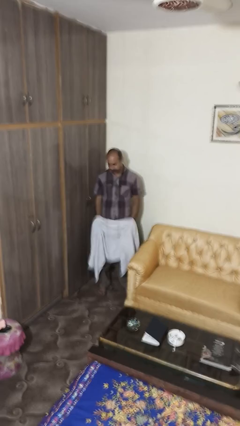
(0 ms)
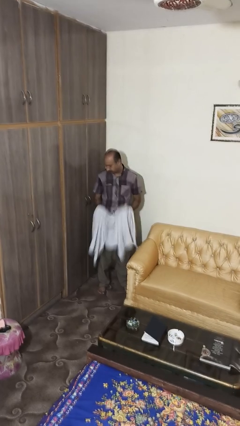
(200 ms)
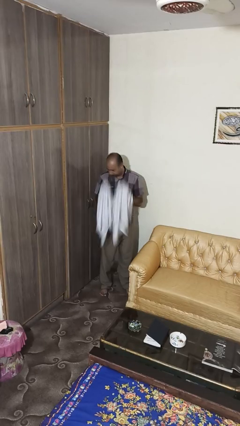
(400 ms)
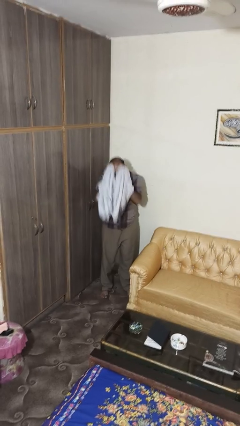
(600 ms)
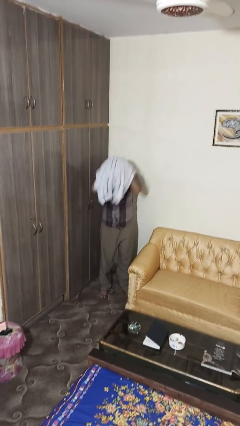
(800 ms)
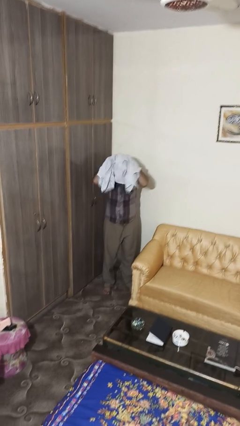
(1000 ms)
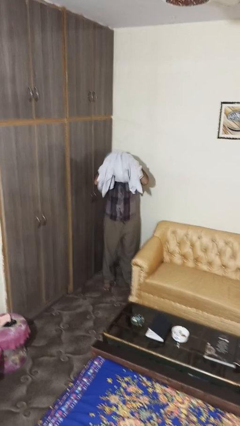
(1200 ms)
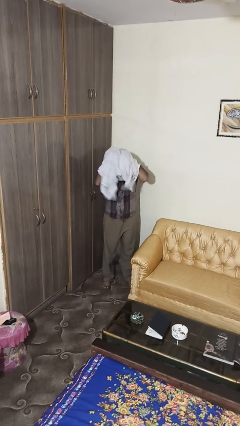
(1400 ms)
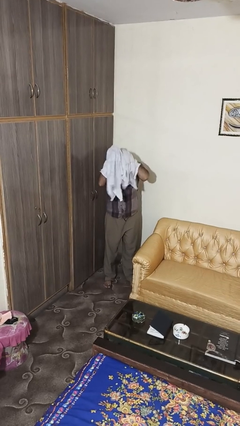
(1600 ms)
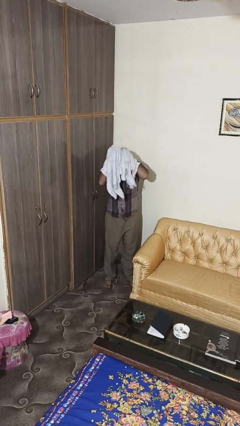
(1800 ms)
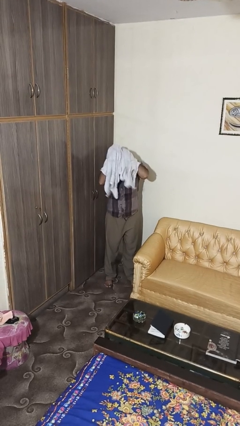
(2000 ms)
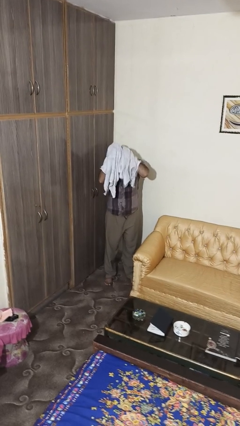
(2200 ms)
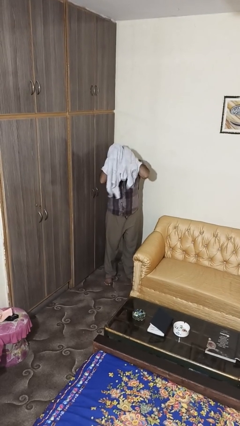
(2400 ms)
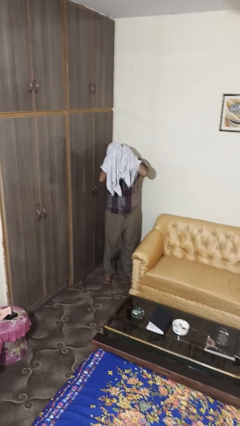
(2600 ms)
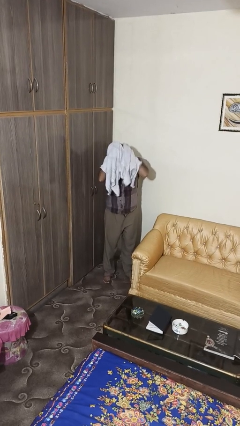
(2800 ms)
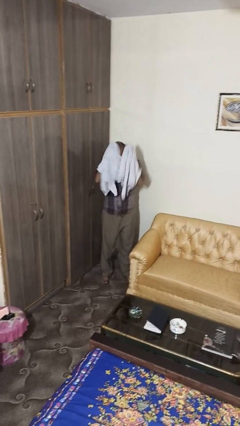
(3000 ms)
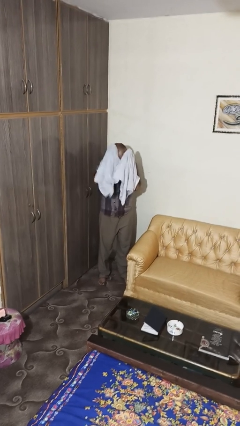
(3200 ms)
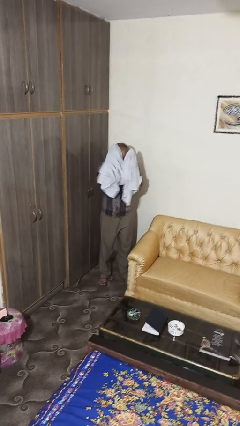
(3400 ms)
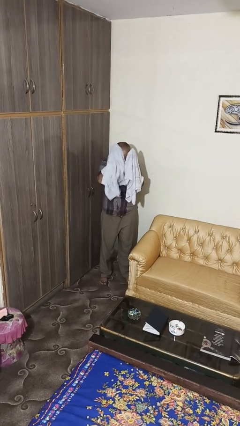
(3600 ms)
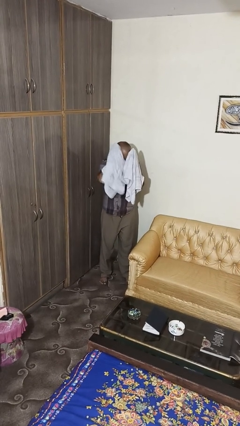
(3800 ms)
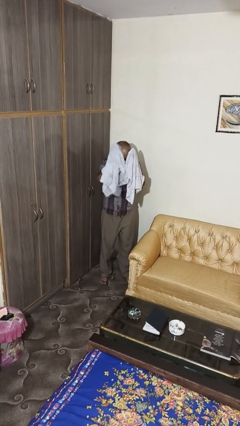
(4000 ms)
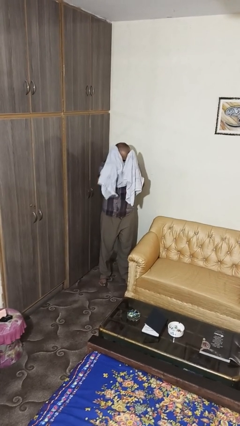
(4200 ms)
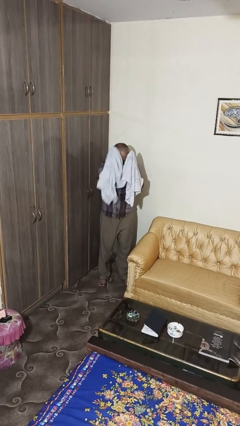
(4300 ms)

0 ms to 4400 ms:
person dries hair with towel

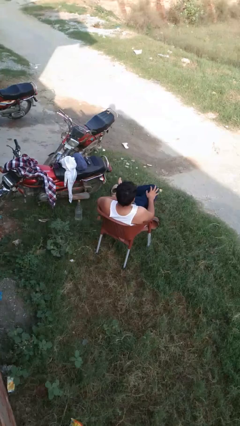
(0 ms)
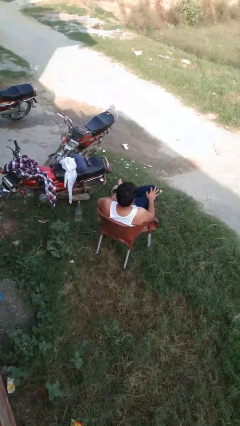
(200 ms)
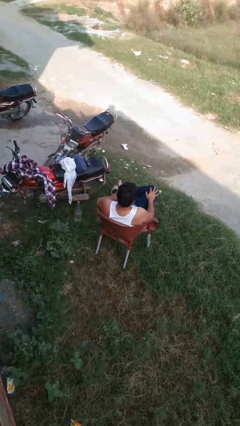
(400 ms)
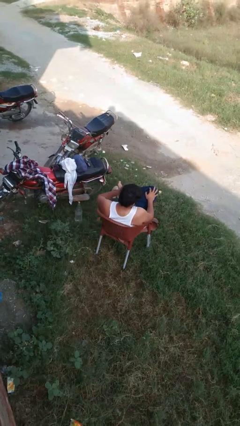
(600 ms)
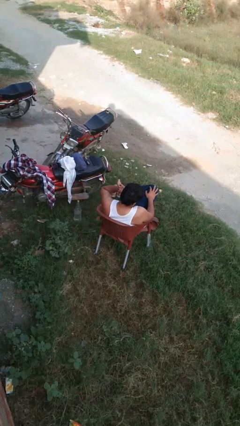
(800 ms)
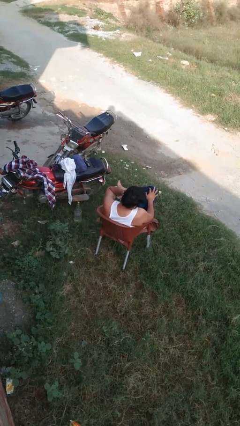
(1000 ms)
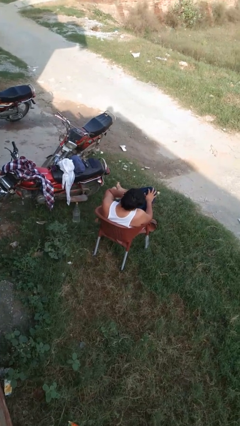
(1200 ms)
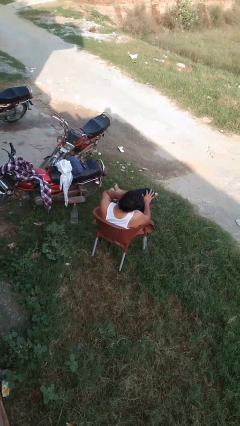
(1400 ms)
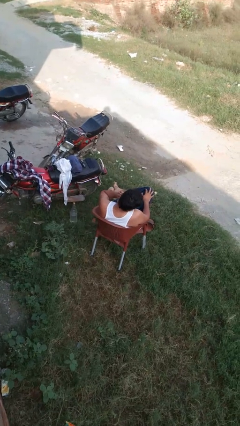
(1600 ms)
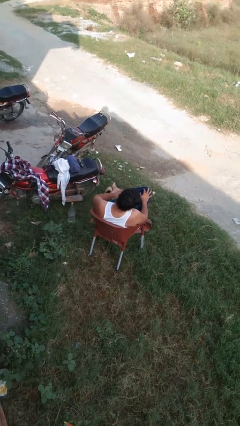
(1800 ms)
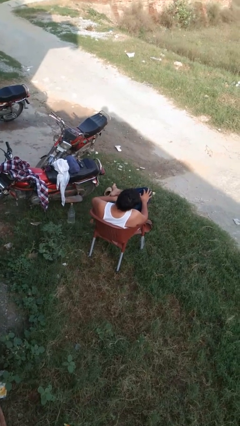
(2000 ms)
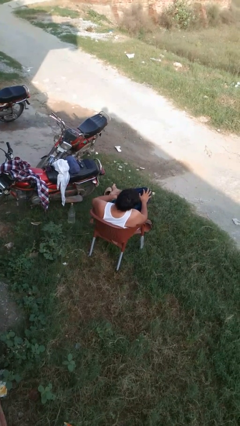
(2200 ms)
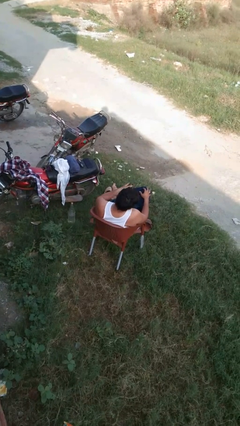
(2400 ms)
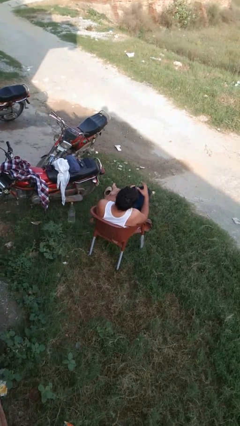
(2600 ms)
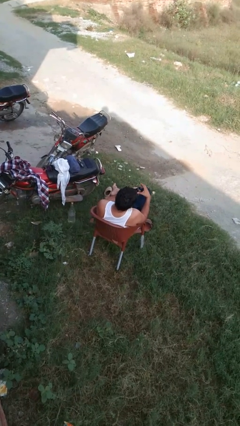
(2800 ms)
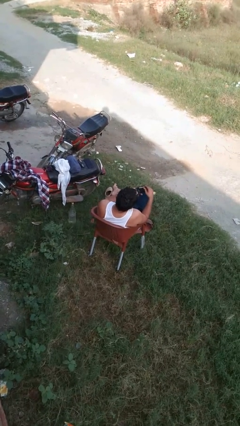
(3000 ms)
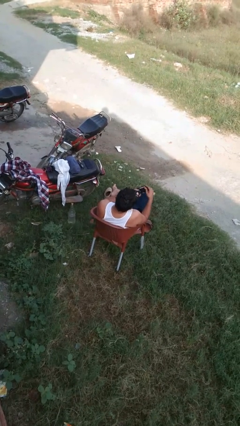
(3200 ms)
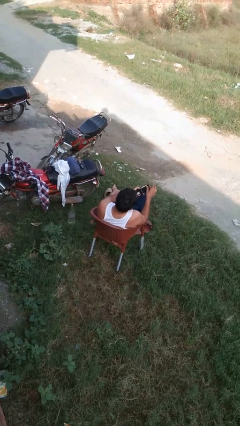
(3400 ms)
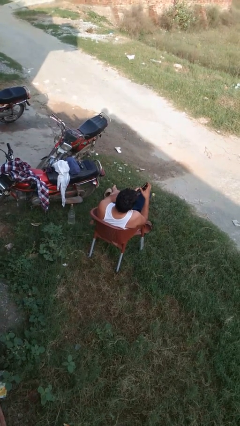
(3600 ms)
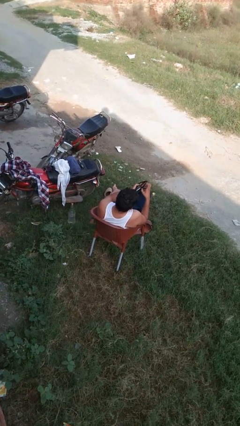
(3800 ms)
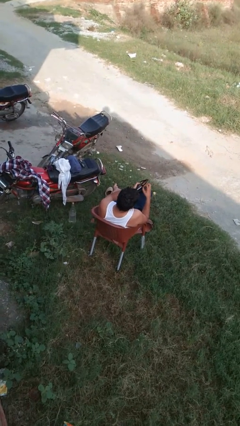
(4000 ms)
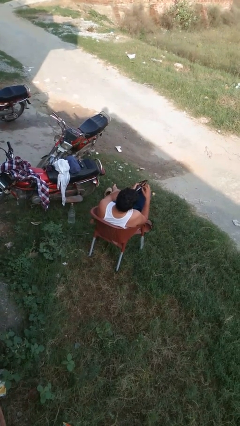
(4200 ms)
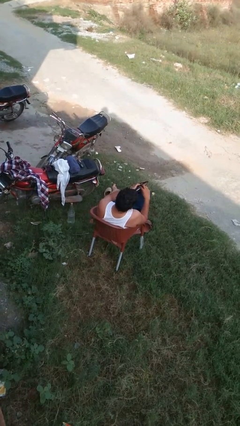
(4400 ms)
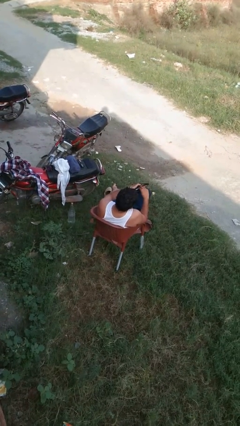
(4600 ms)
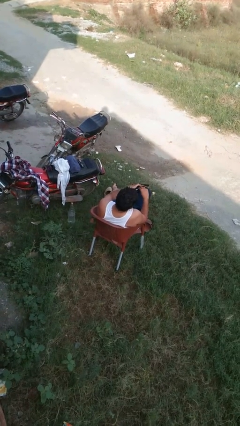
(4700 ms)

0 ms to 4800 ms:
person searches in purse

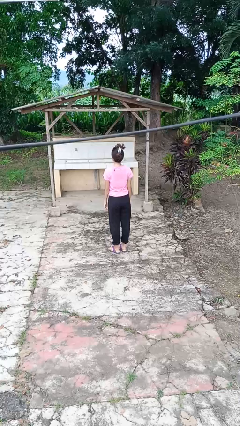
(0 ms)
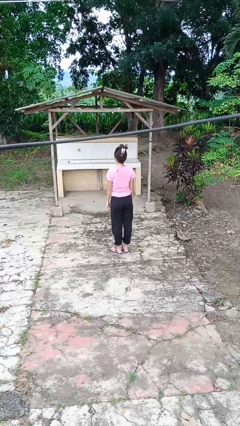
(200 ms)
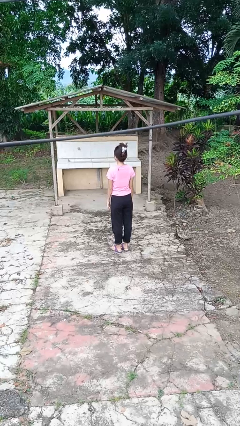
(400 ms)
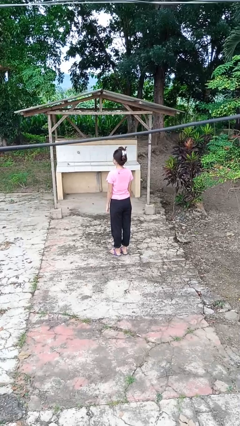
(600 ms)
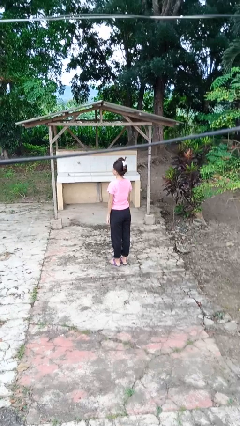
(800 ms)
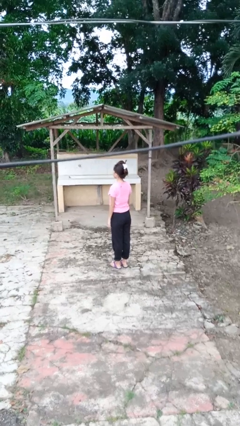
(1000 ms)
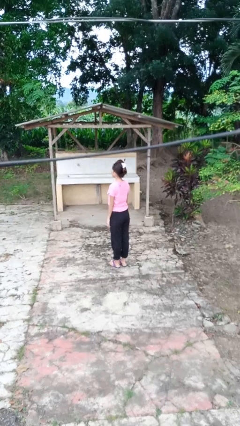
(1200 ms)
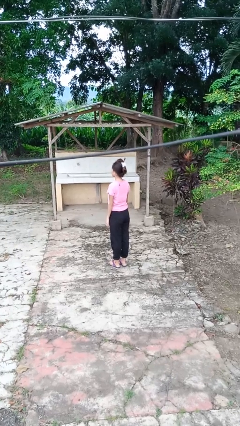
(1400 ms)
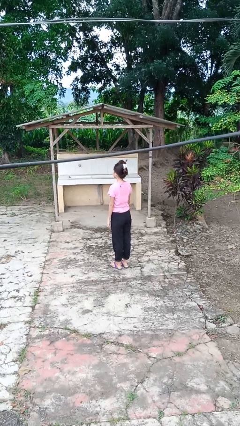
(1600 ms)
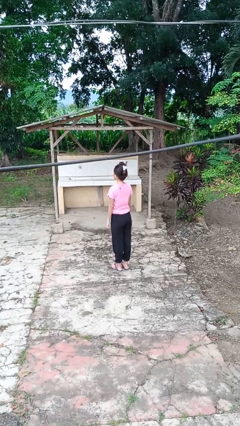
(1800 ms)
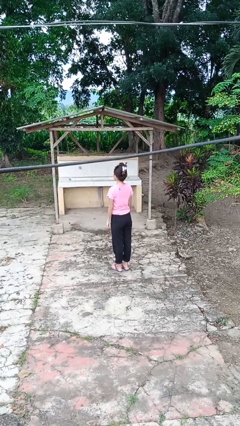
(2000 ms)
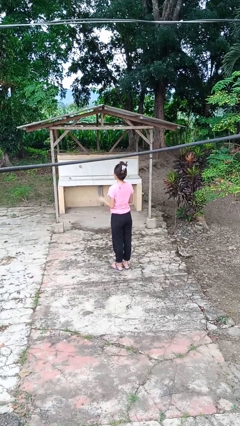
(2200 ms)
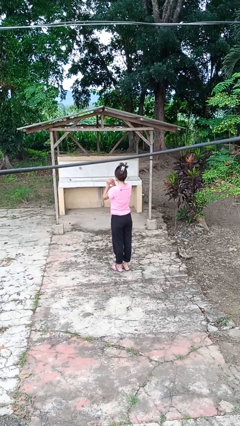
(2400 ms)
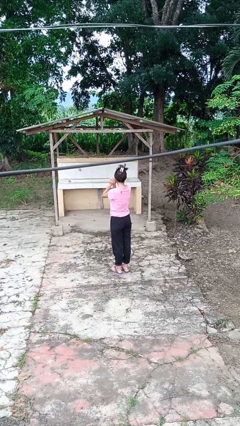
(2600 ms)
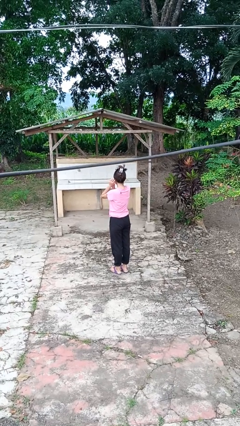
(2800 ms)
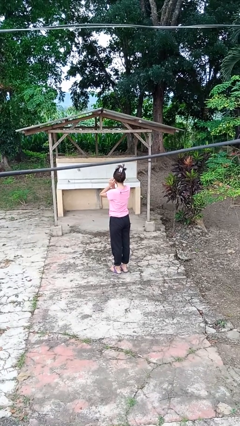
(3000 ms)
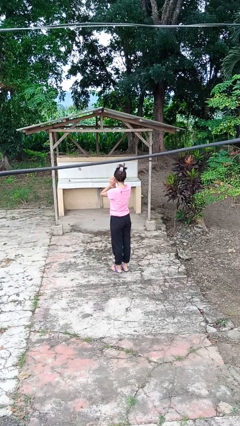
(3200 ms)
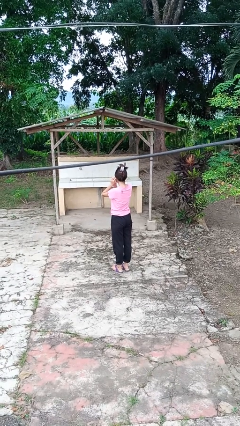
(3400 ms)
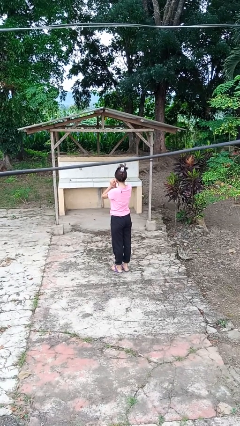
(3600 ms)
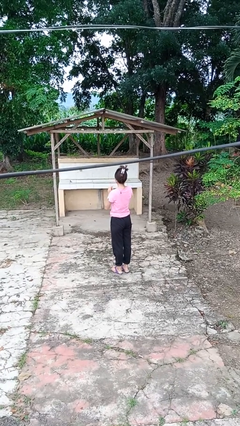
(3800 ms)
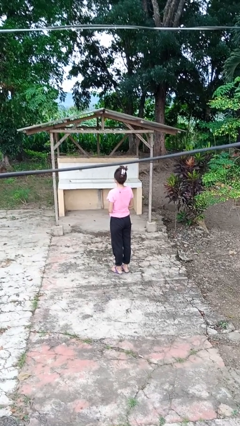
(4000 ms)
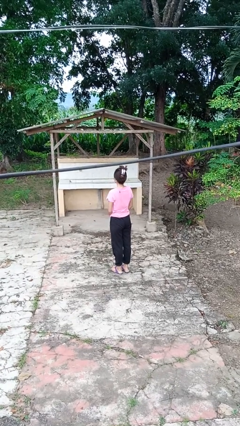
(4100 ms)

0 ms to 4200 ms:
person puts on earrings

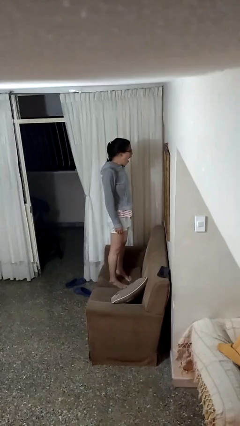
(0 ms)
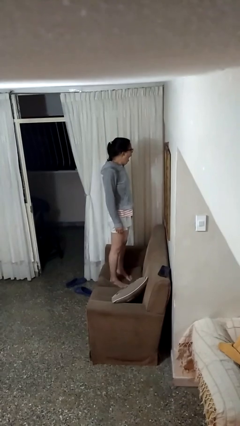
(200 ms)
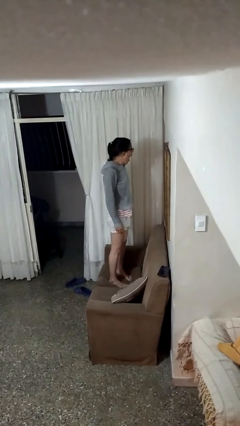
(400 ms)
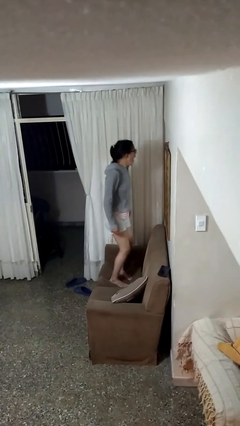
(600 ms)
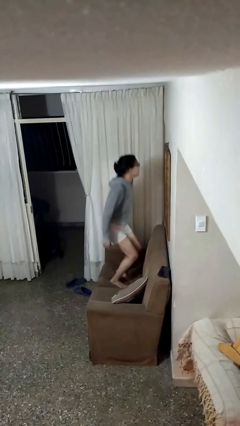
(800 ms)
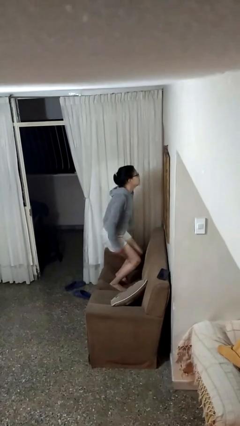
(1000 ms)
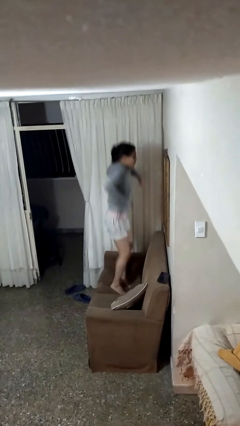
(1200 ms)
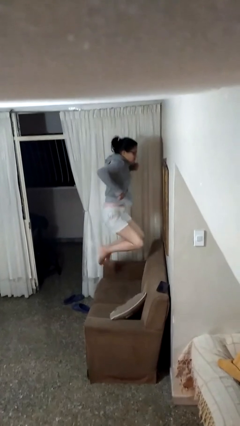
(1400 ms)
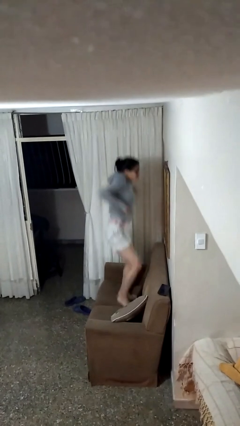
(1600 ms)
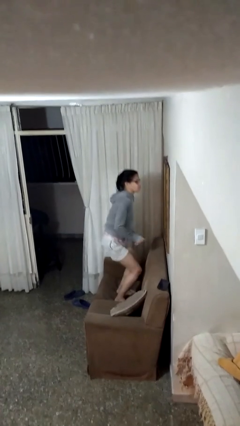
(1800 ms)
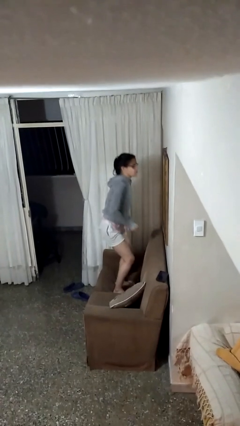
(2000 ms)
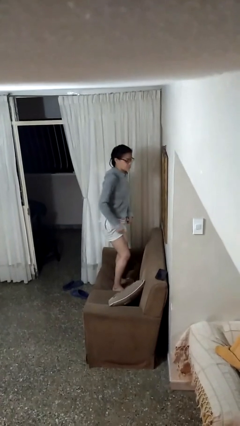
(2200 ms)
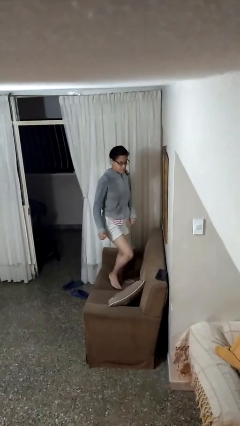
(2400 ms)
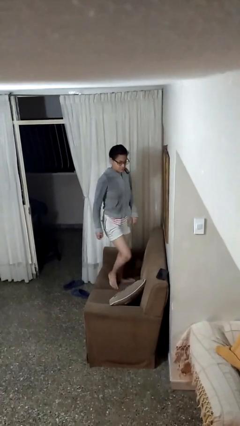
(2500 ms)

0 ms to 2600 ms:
person jumps on couch

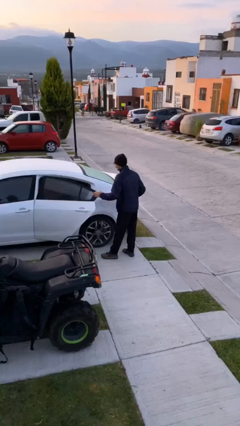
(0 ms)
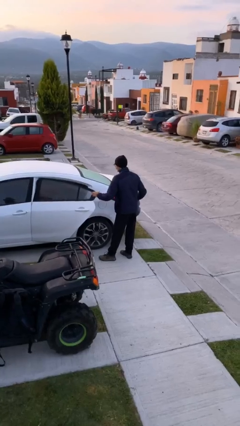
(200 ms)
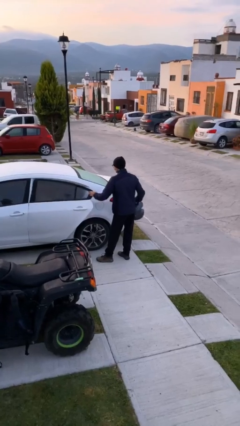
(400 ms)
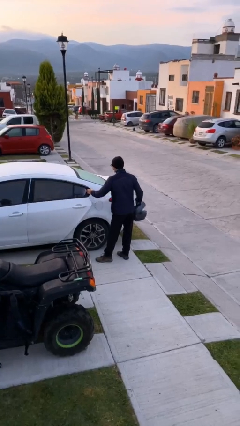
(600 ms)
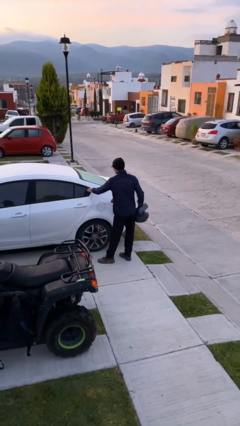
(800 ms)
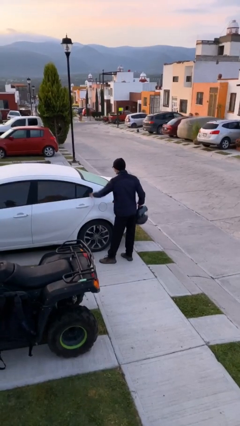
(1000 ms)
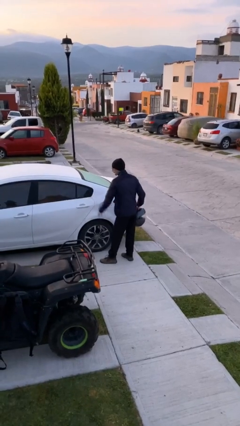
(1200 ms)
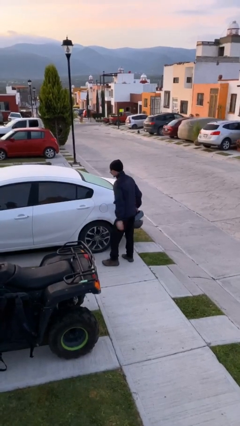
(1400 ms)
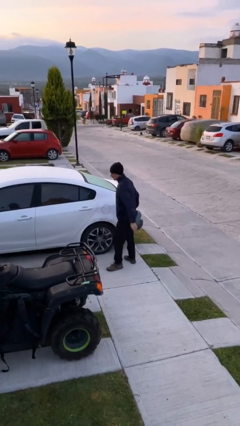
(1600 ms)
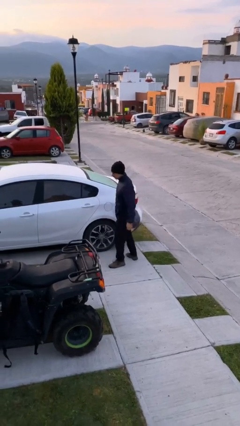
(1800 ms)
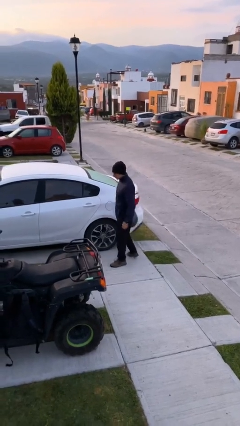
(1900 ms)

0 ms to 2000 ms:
person closes car door
